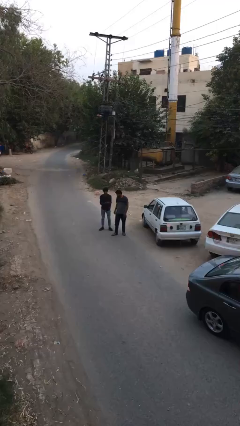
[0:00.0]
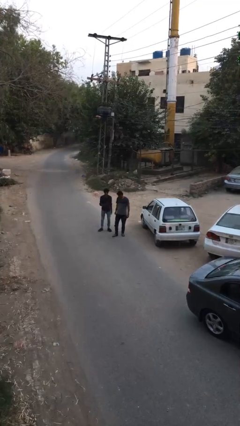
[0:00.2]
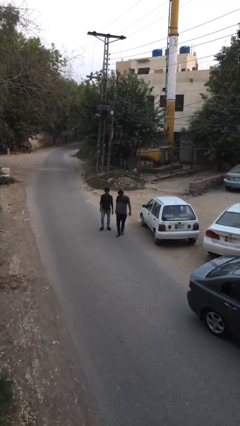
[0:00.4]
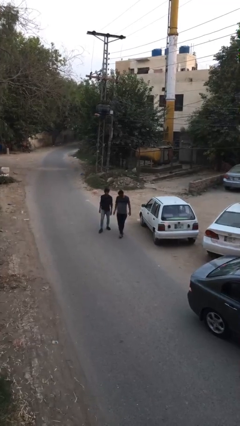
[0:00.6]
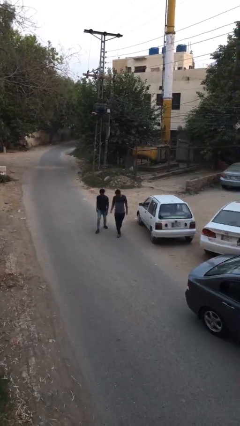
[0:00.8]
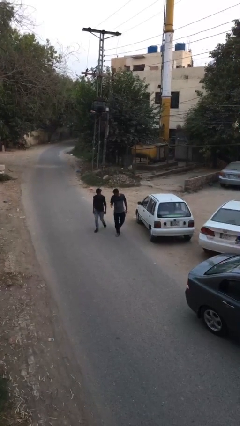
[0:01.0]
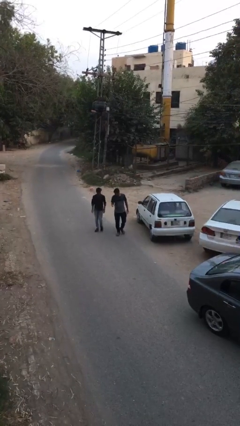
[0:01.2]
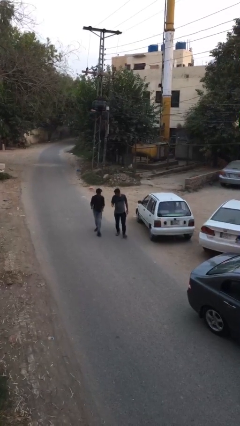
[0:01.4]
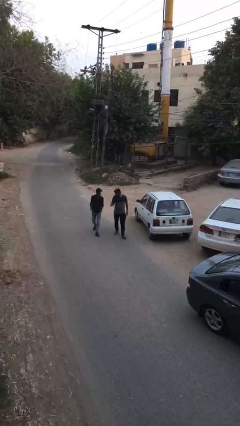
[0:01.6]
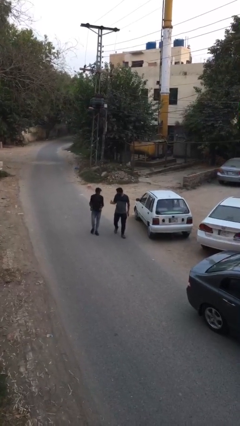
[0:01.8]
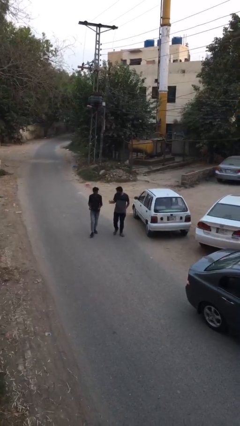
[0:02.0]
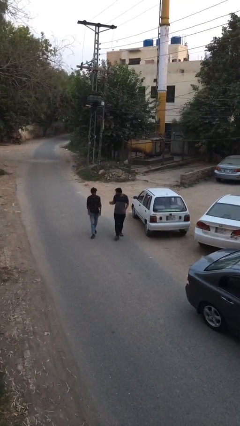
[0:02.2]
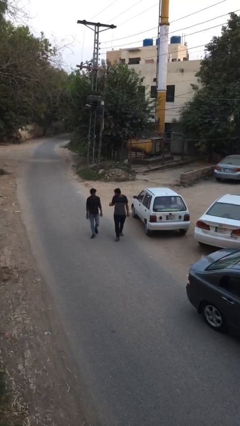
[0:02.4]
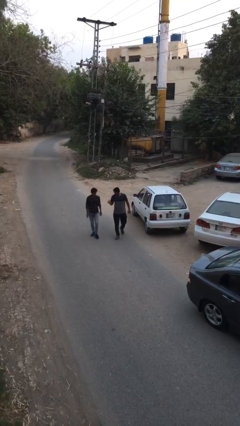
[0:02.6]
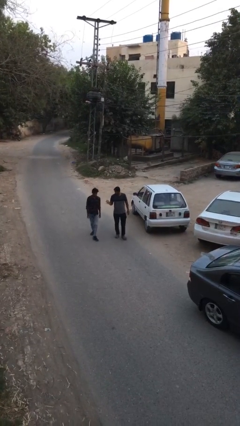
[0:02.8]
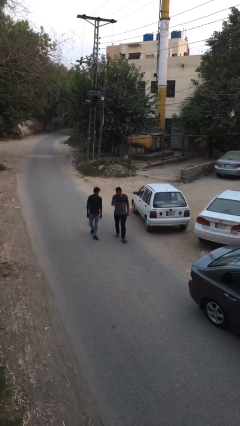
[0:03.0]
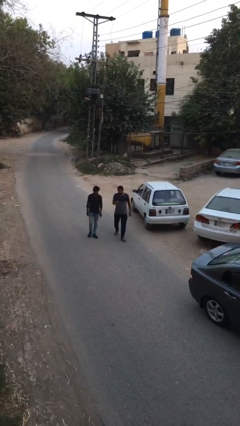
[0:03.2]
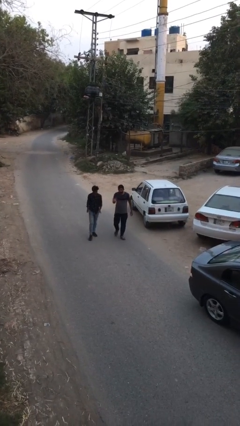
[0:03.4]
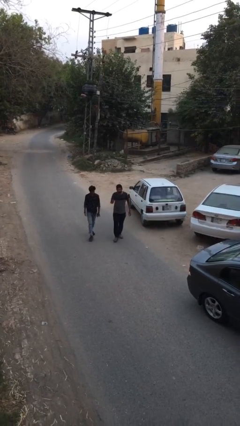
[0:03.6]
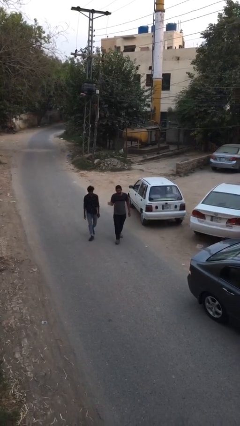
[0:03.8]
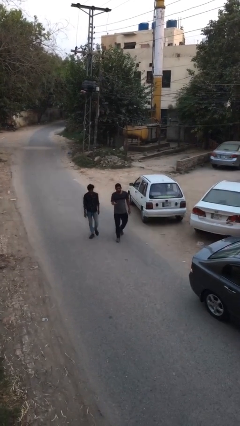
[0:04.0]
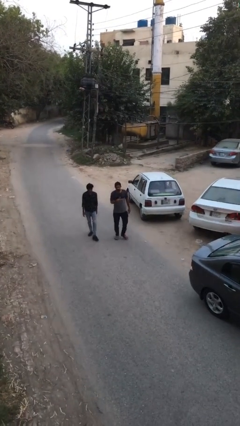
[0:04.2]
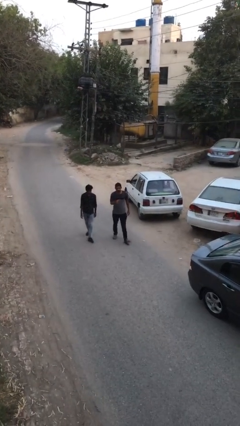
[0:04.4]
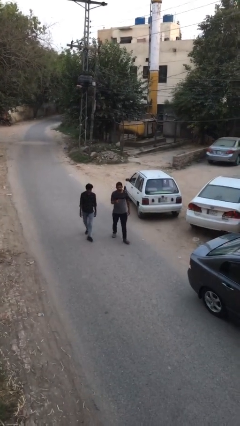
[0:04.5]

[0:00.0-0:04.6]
person talks to person

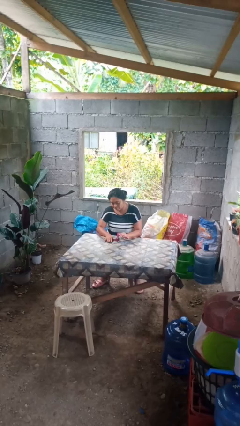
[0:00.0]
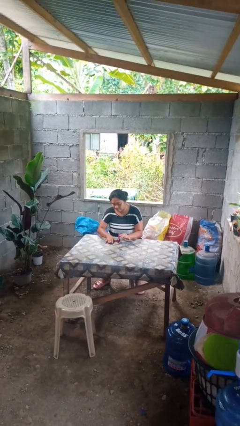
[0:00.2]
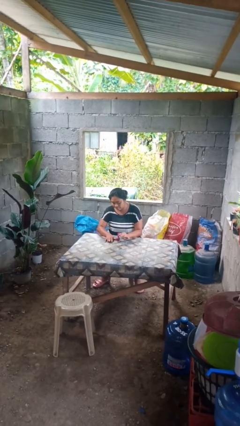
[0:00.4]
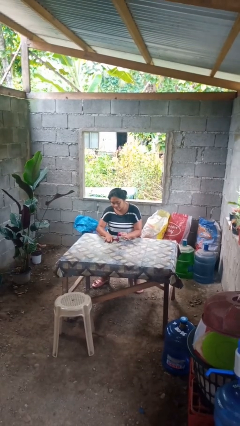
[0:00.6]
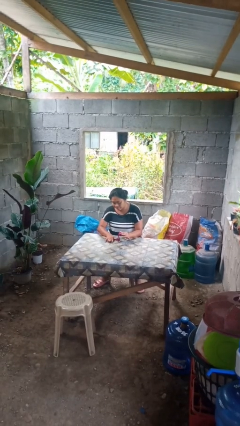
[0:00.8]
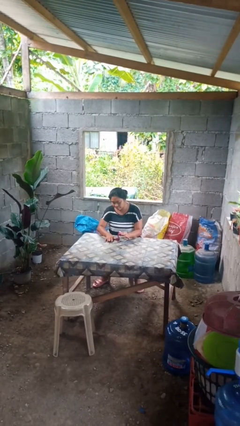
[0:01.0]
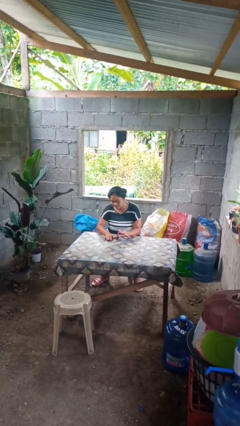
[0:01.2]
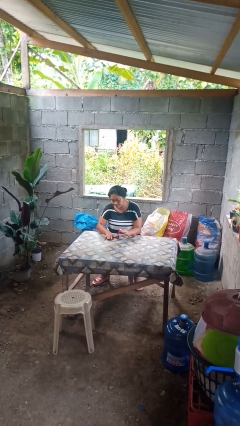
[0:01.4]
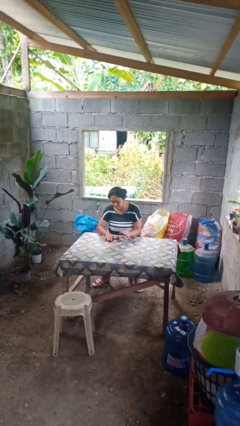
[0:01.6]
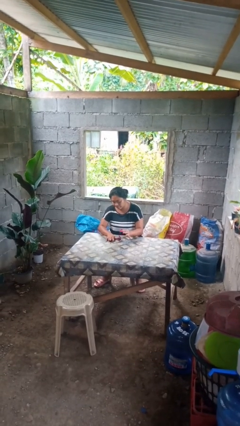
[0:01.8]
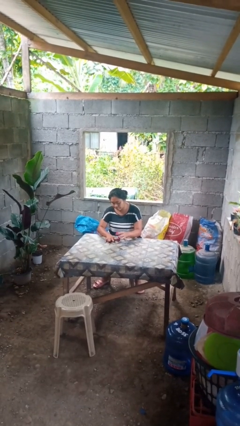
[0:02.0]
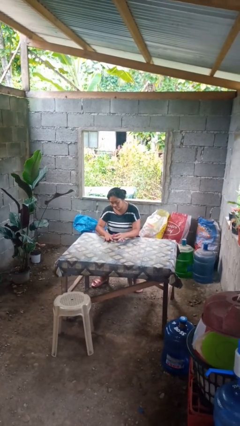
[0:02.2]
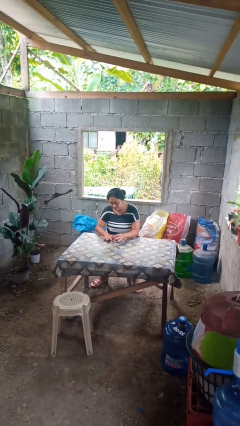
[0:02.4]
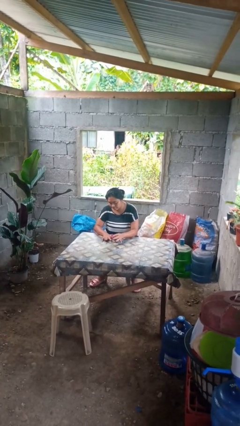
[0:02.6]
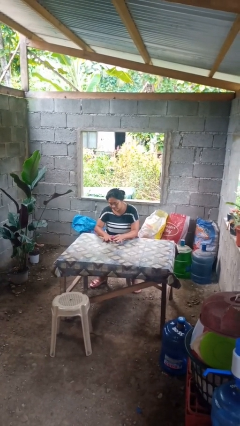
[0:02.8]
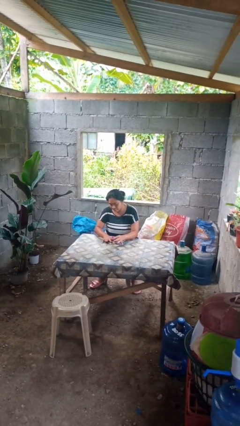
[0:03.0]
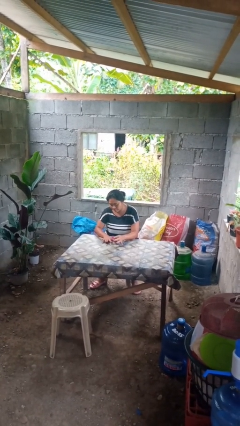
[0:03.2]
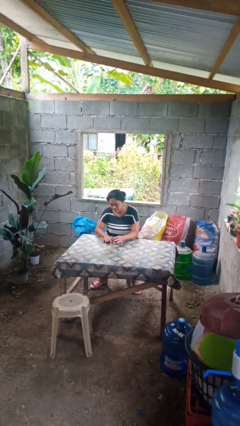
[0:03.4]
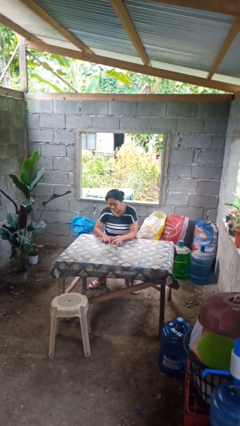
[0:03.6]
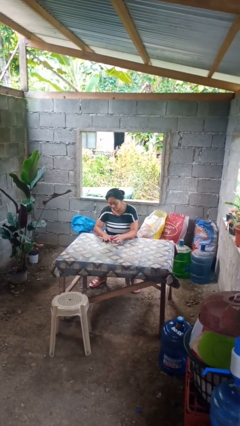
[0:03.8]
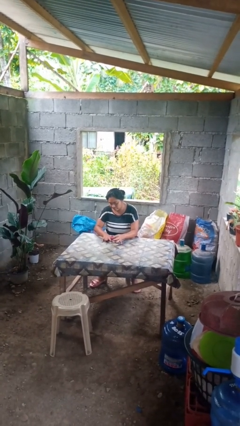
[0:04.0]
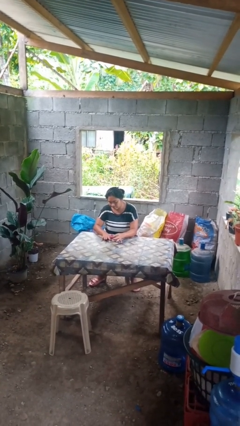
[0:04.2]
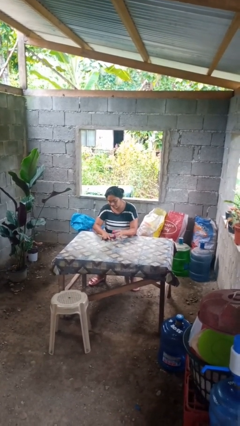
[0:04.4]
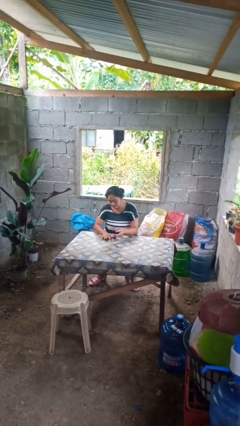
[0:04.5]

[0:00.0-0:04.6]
person paints fingernails

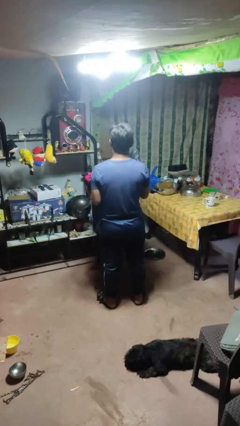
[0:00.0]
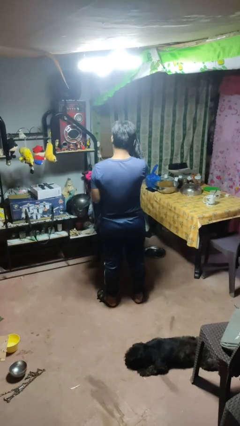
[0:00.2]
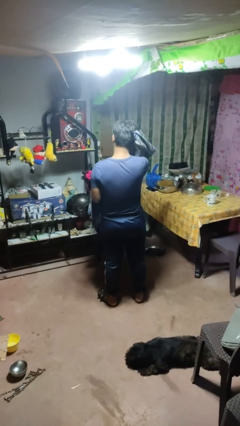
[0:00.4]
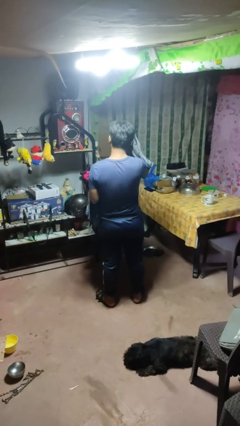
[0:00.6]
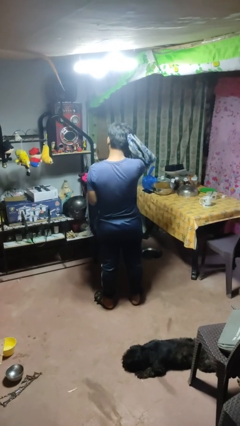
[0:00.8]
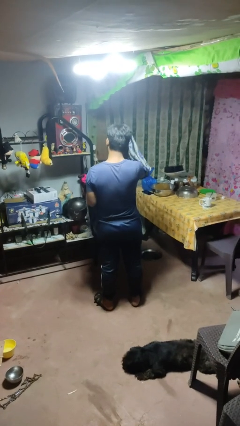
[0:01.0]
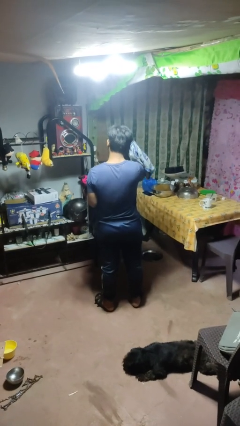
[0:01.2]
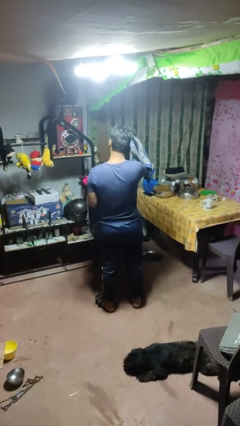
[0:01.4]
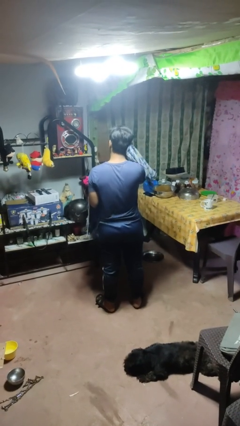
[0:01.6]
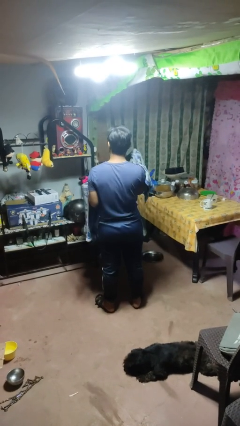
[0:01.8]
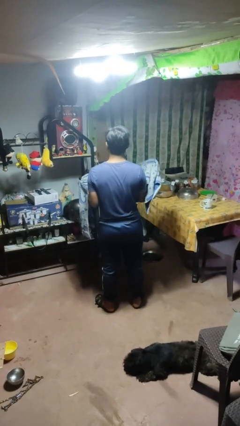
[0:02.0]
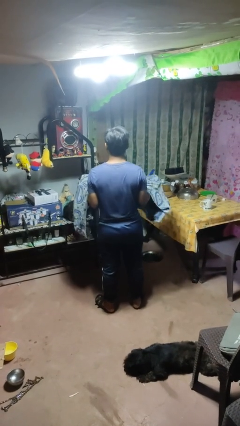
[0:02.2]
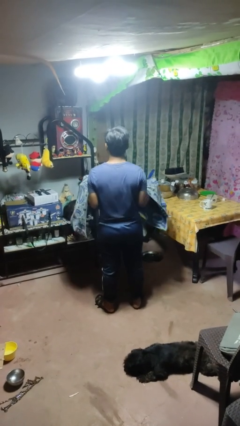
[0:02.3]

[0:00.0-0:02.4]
person dries hair with towel

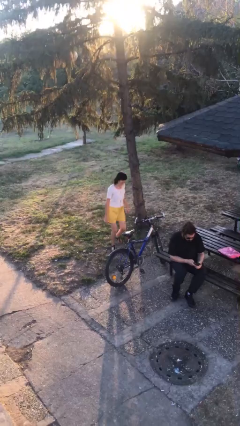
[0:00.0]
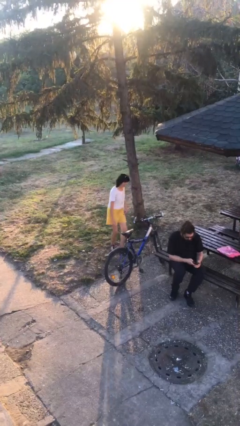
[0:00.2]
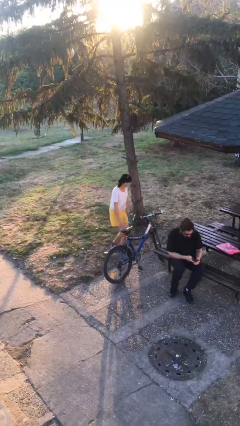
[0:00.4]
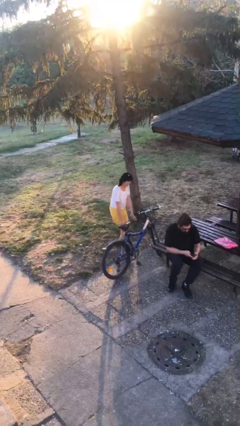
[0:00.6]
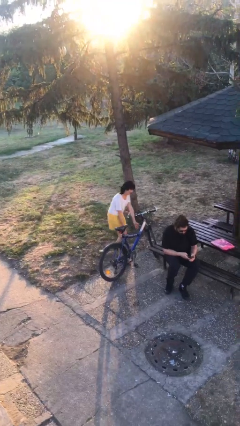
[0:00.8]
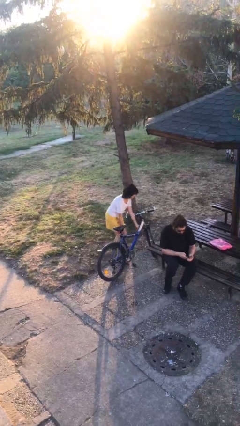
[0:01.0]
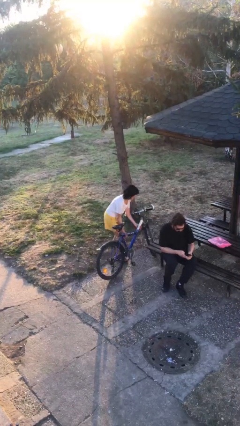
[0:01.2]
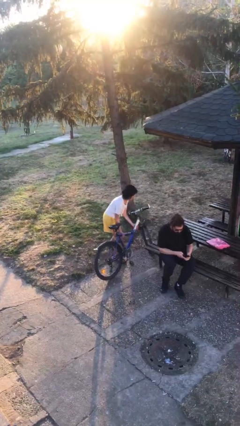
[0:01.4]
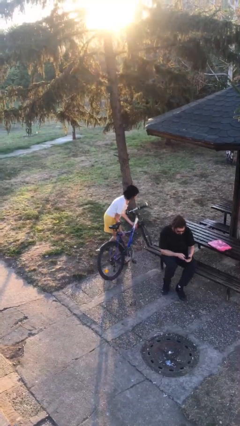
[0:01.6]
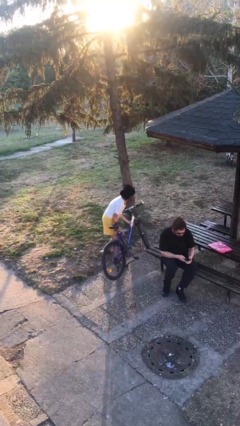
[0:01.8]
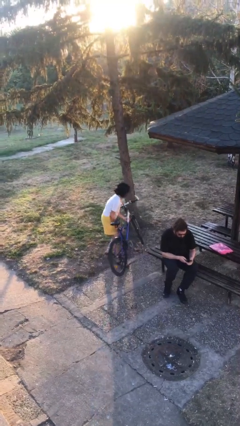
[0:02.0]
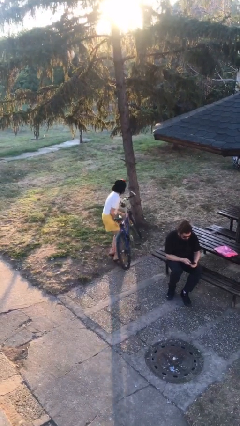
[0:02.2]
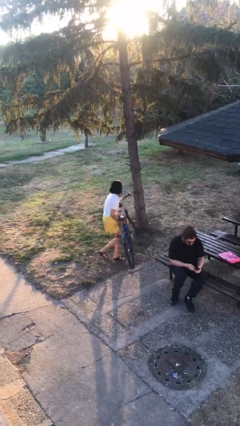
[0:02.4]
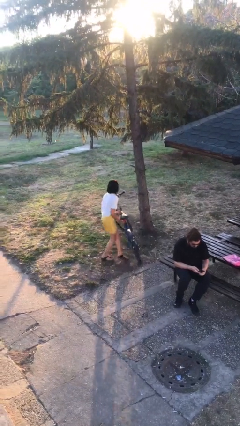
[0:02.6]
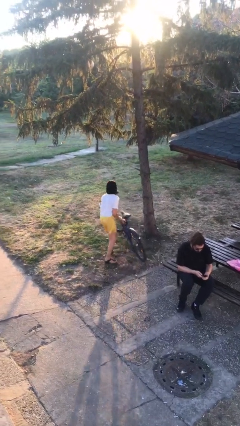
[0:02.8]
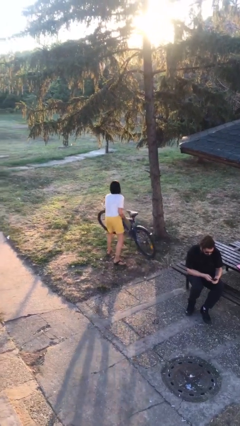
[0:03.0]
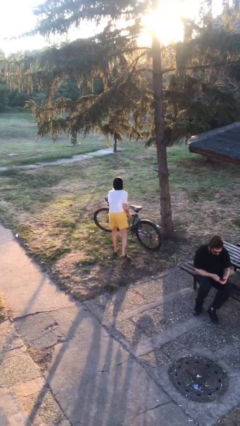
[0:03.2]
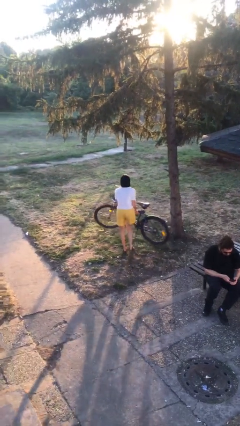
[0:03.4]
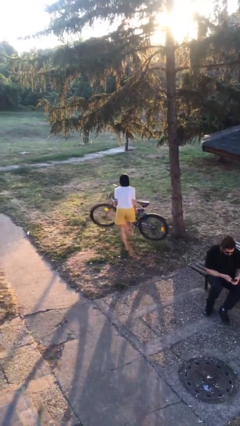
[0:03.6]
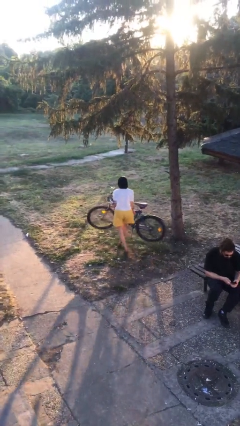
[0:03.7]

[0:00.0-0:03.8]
person steals object from person

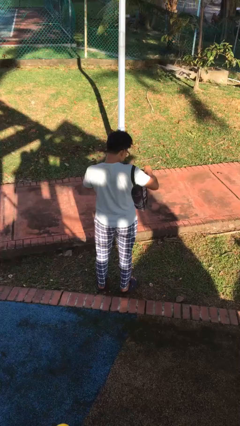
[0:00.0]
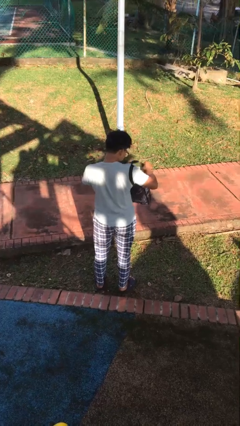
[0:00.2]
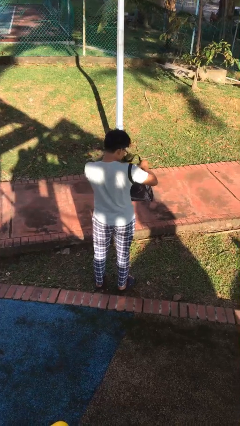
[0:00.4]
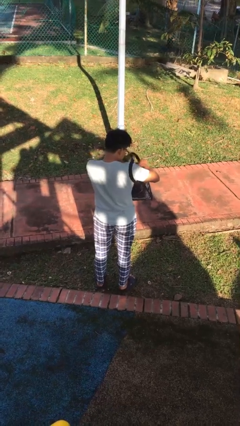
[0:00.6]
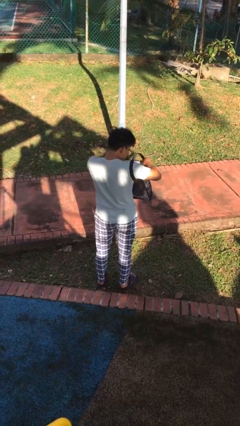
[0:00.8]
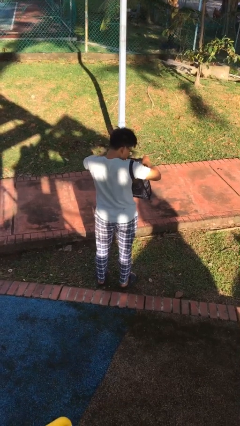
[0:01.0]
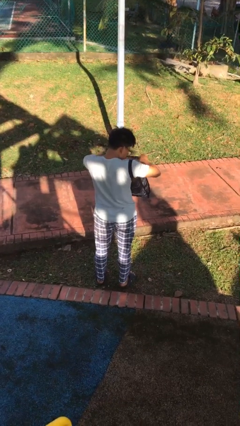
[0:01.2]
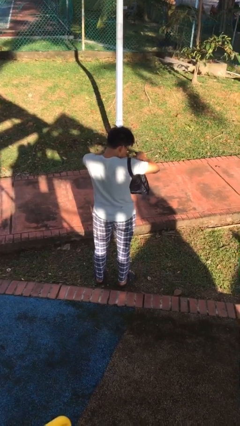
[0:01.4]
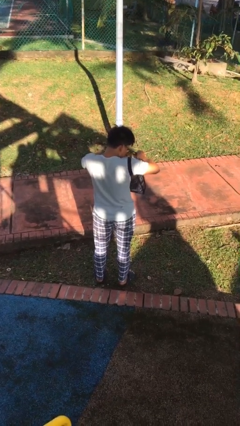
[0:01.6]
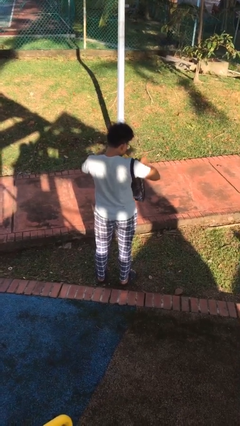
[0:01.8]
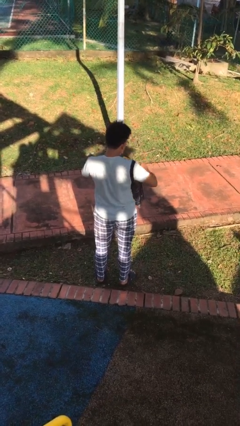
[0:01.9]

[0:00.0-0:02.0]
person searches in bag
